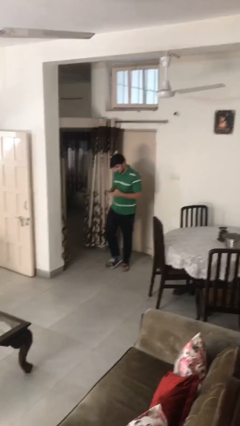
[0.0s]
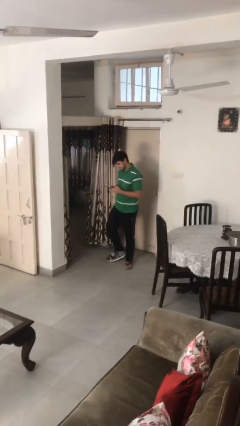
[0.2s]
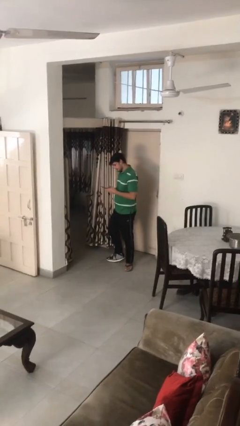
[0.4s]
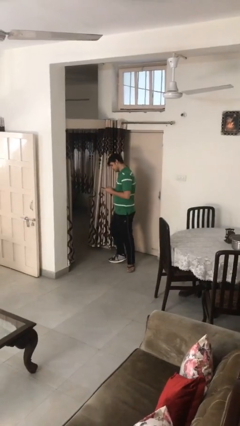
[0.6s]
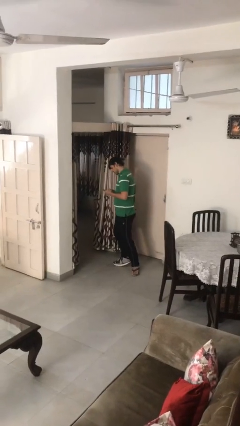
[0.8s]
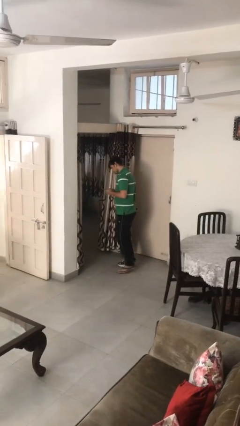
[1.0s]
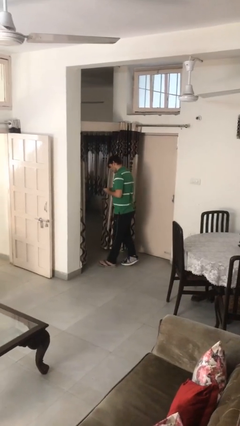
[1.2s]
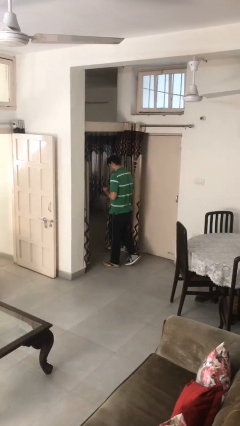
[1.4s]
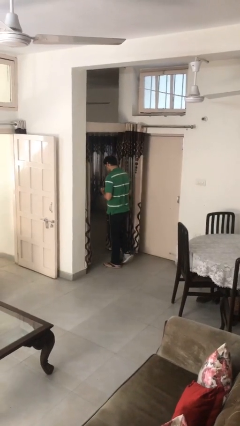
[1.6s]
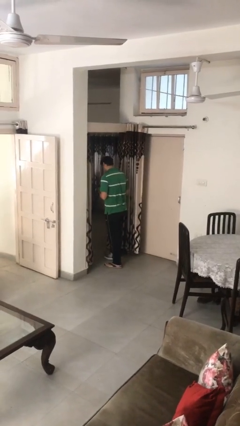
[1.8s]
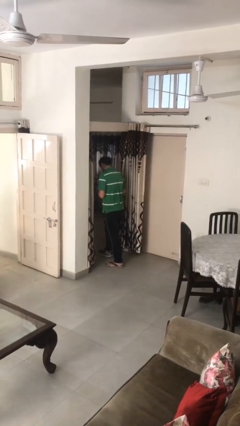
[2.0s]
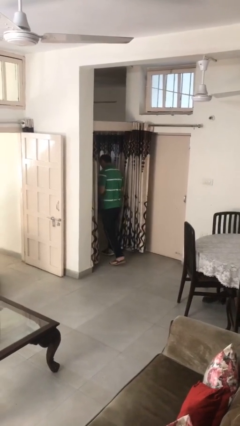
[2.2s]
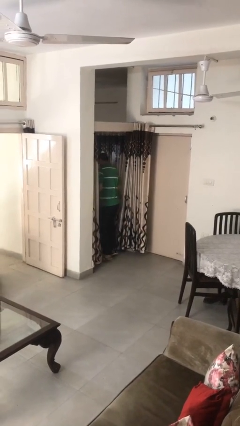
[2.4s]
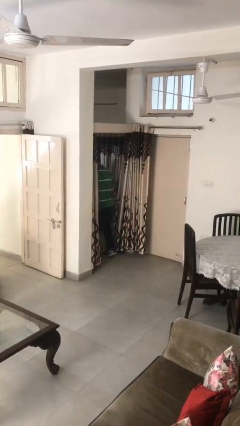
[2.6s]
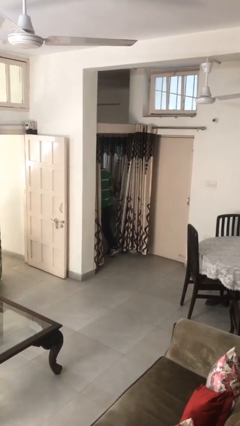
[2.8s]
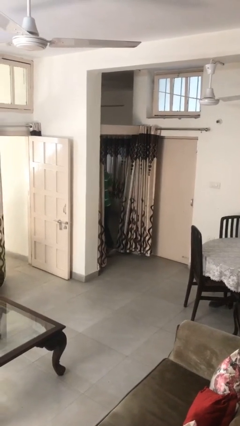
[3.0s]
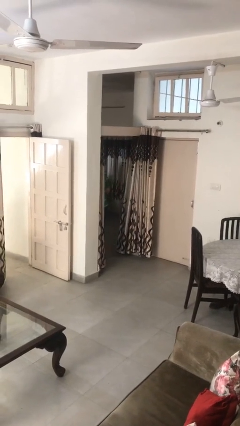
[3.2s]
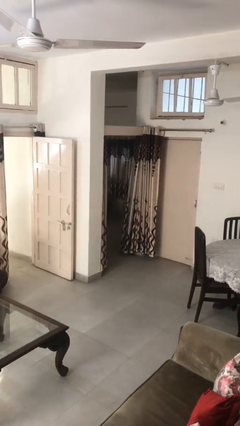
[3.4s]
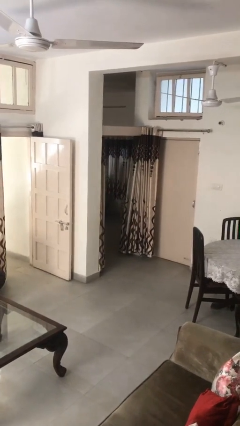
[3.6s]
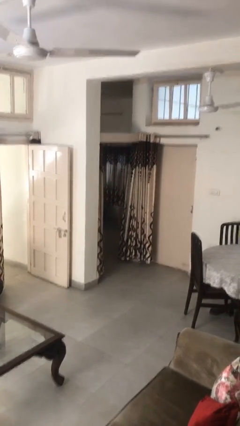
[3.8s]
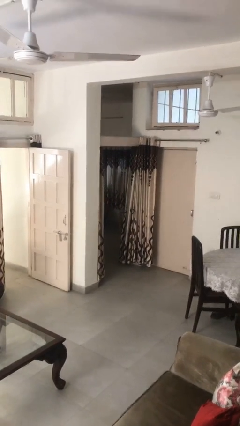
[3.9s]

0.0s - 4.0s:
person exits scene through structure

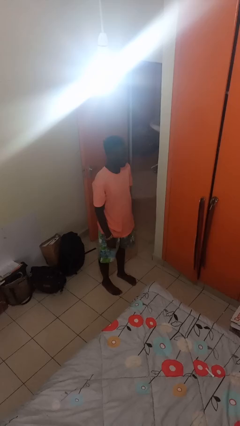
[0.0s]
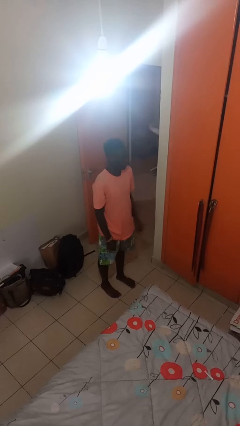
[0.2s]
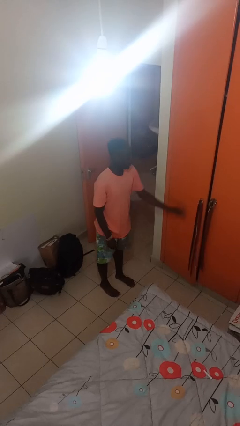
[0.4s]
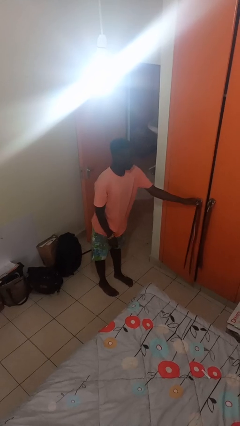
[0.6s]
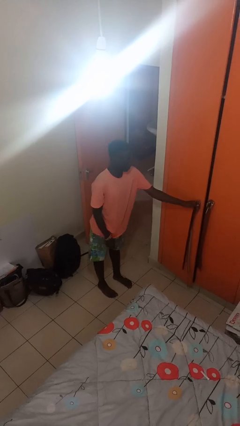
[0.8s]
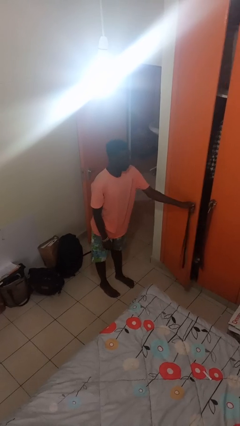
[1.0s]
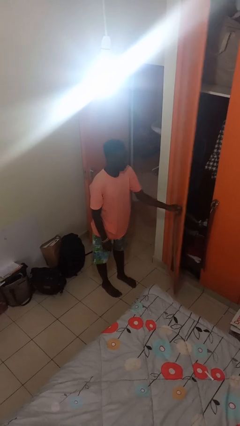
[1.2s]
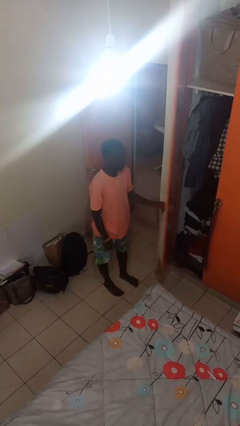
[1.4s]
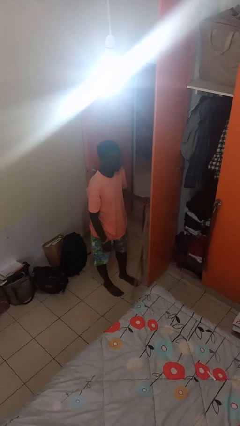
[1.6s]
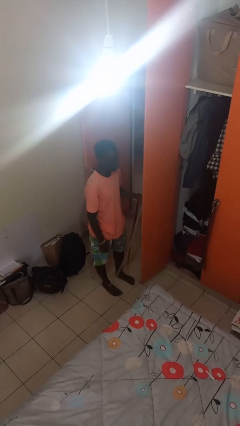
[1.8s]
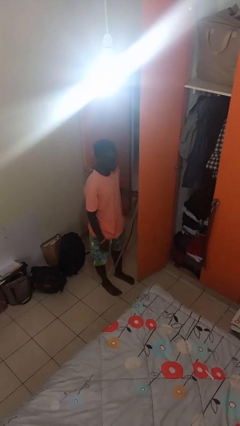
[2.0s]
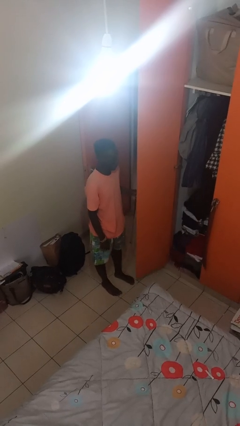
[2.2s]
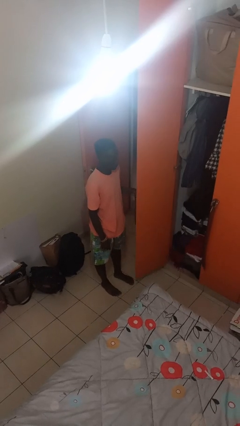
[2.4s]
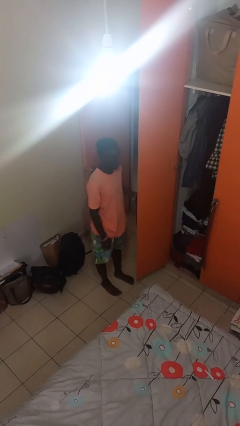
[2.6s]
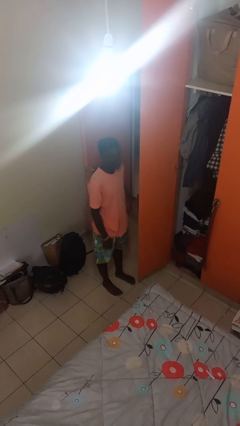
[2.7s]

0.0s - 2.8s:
person opens closet door

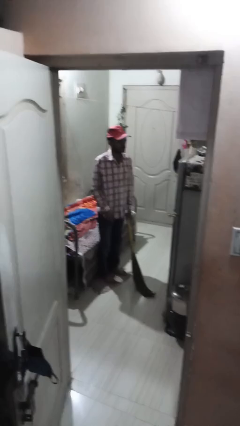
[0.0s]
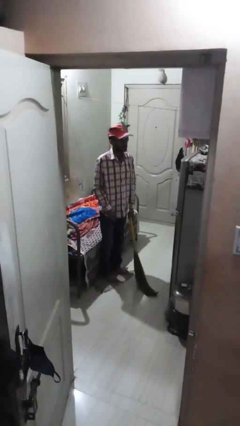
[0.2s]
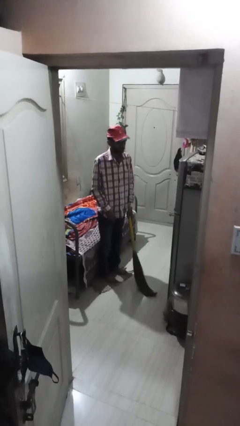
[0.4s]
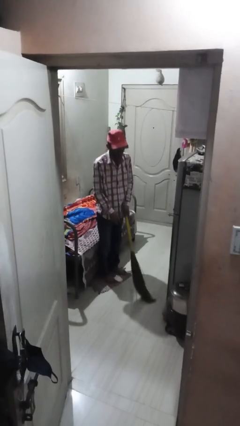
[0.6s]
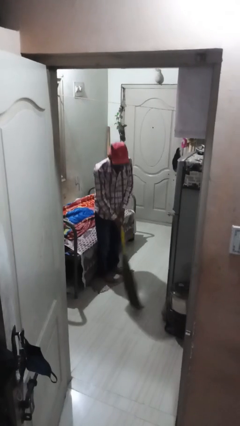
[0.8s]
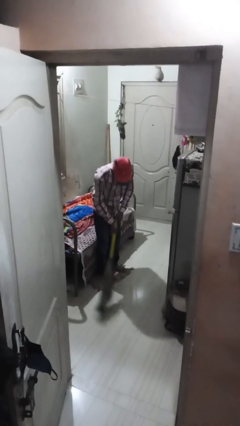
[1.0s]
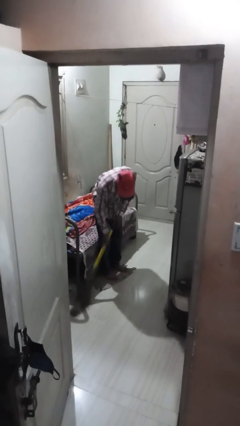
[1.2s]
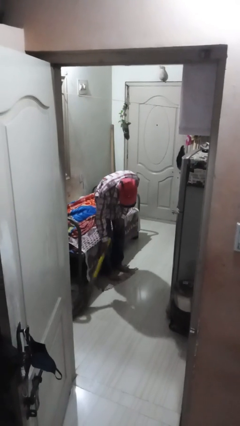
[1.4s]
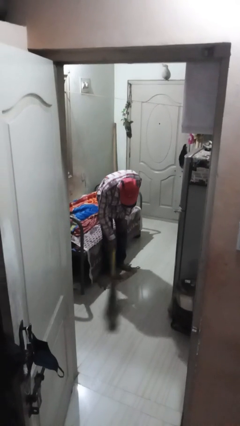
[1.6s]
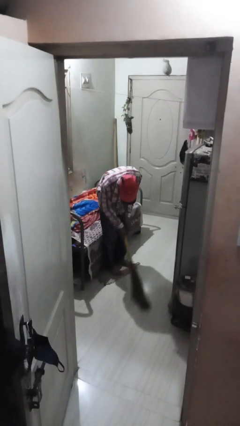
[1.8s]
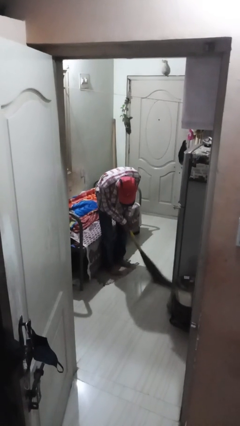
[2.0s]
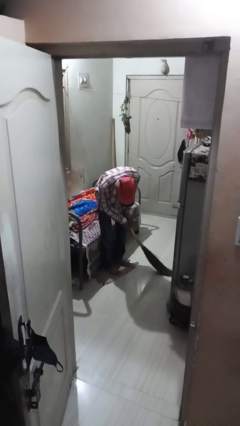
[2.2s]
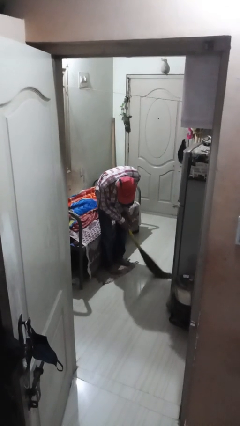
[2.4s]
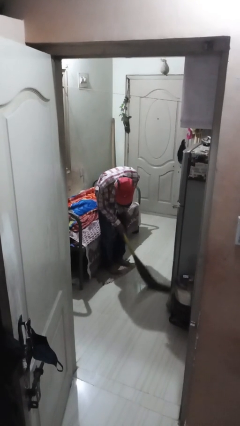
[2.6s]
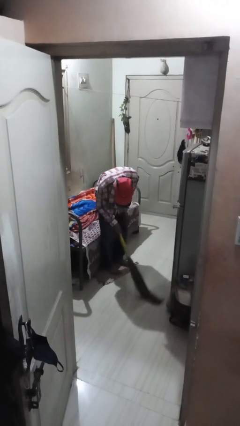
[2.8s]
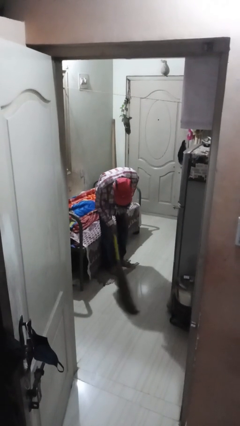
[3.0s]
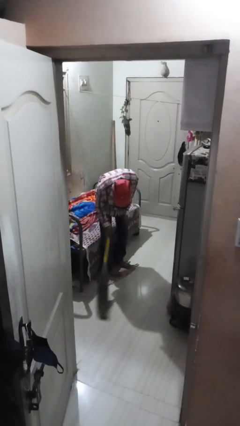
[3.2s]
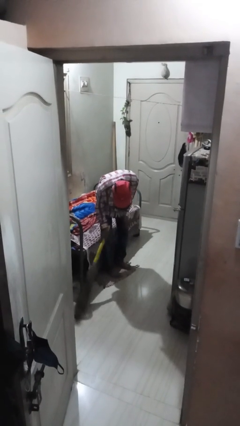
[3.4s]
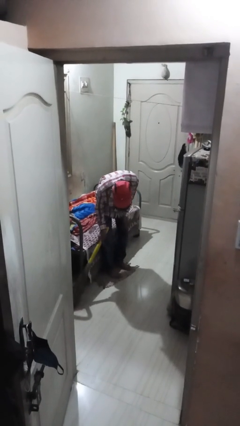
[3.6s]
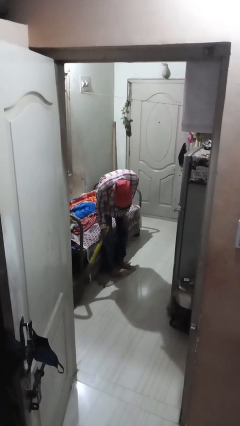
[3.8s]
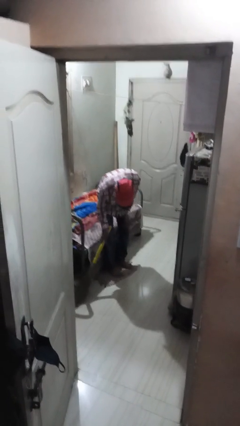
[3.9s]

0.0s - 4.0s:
person sweeps floor

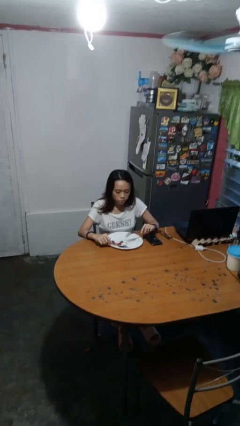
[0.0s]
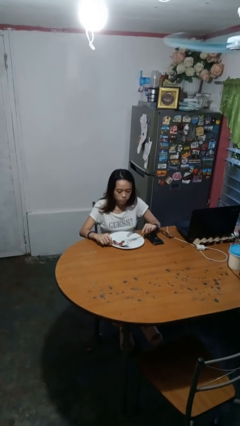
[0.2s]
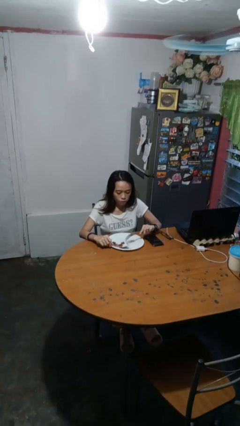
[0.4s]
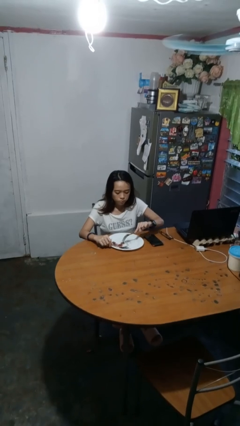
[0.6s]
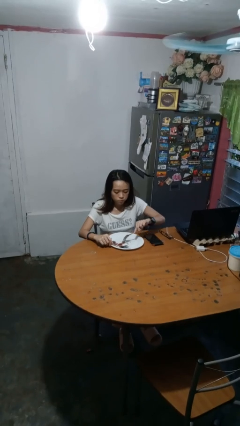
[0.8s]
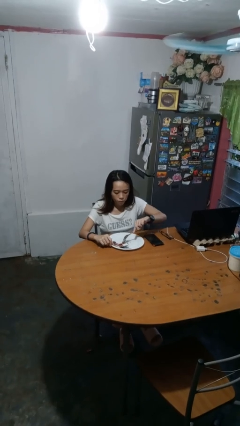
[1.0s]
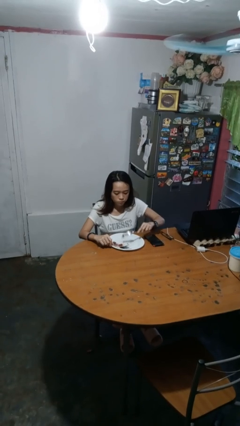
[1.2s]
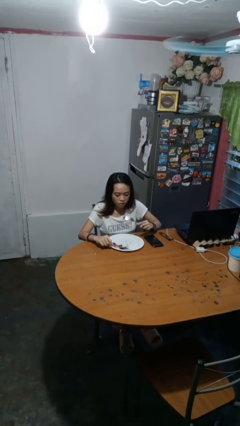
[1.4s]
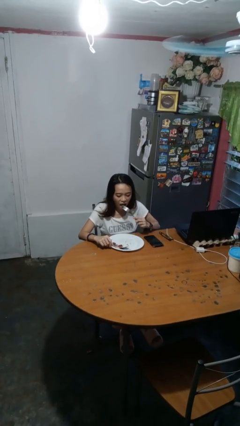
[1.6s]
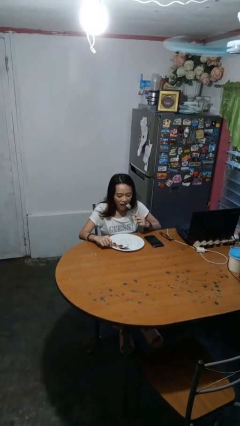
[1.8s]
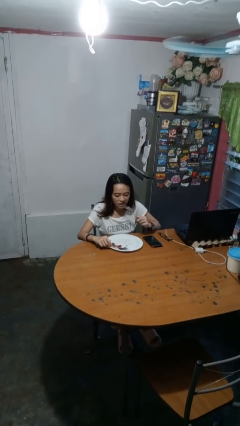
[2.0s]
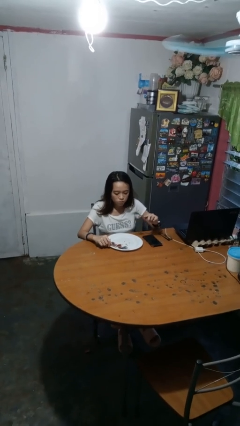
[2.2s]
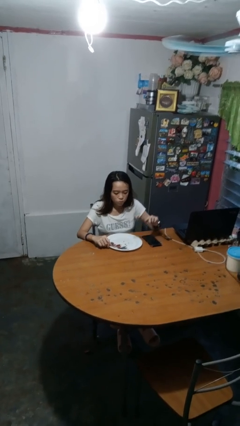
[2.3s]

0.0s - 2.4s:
person eats with utensil

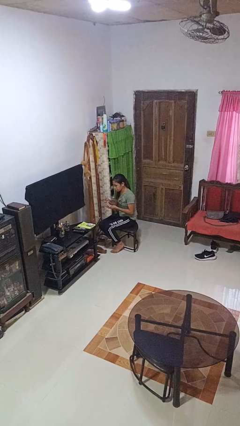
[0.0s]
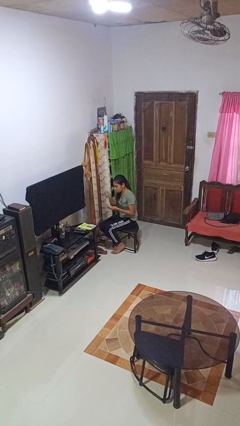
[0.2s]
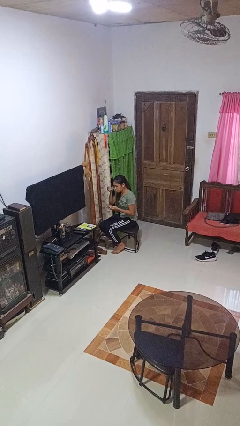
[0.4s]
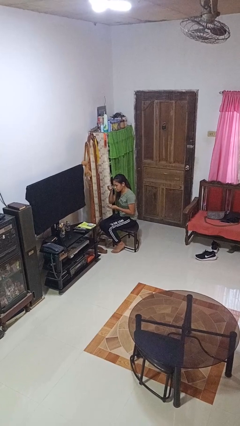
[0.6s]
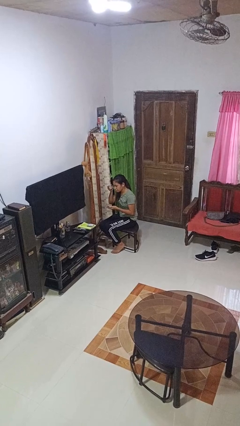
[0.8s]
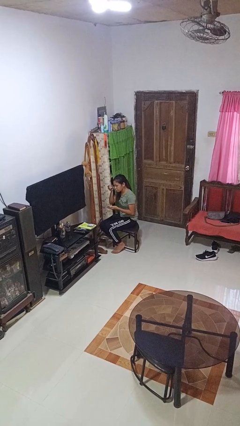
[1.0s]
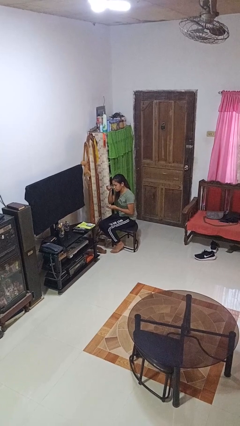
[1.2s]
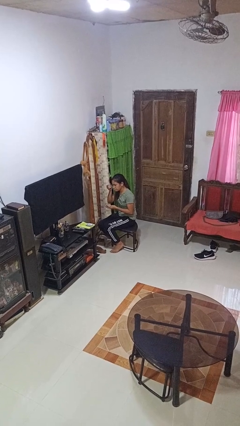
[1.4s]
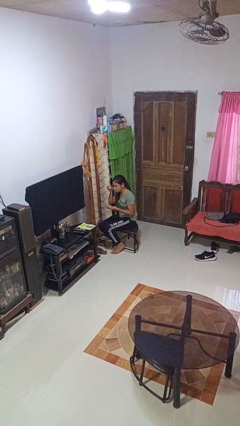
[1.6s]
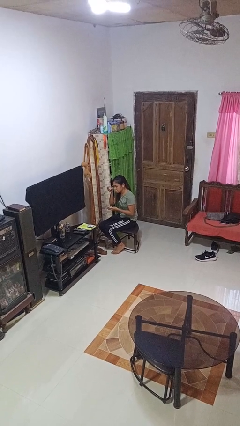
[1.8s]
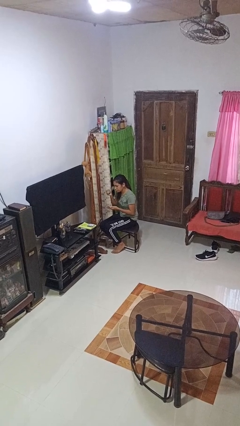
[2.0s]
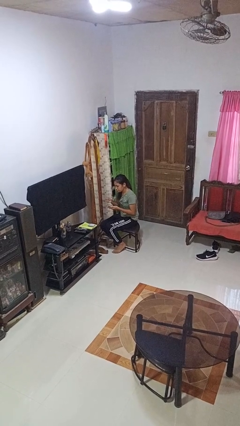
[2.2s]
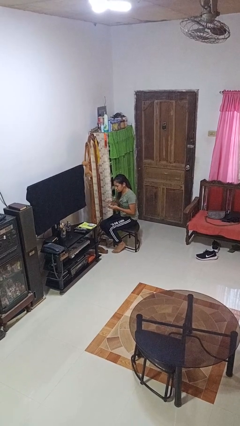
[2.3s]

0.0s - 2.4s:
person applies eye makeup

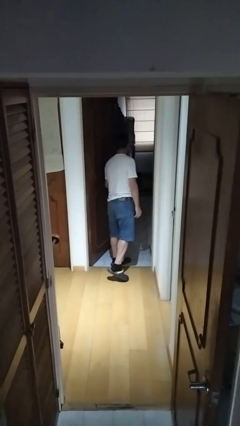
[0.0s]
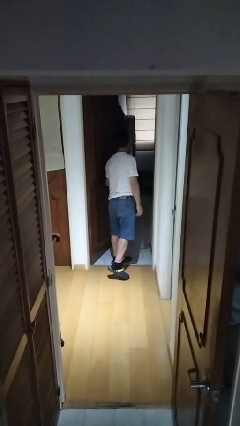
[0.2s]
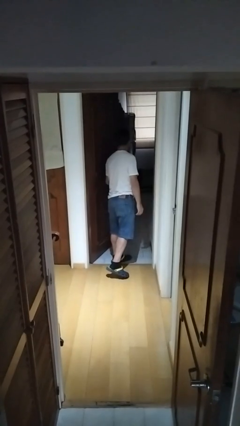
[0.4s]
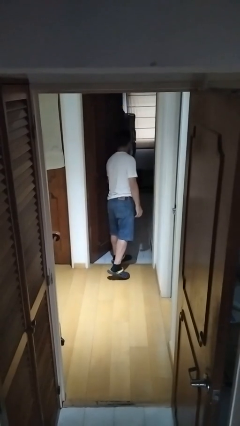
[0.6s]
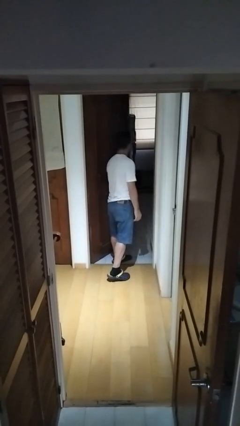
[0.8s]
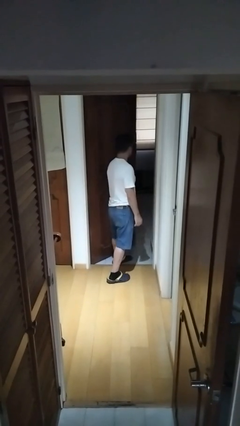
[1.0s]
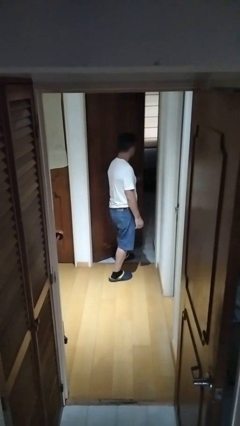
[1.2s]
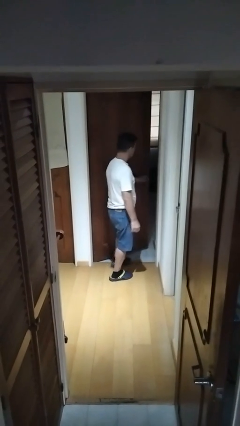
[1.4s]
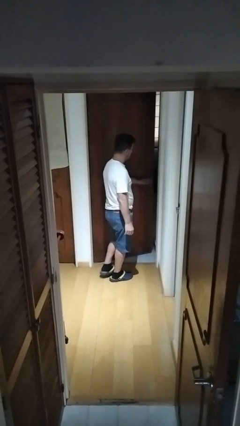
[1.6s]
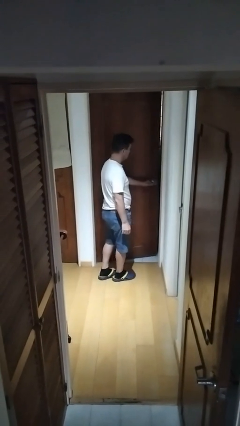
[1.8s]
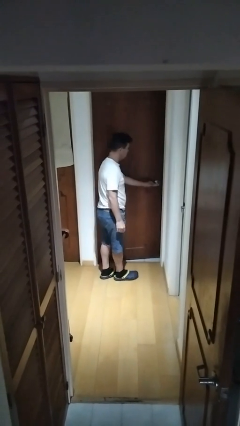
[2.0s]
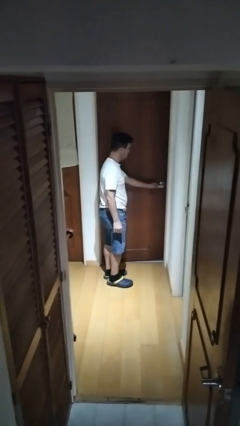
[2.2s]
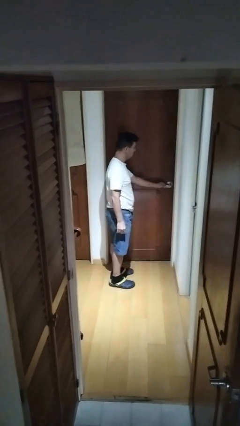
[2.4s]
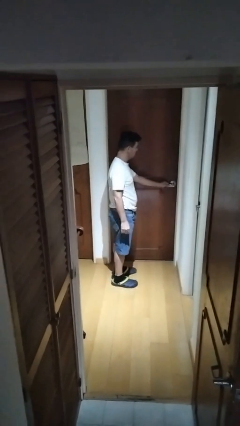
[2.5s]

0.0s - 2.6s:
person closes facility door
